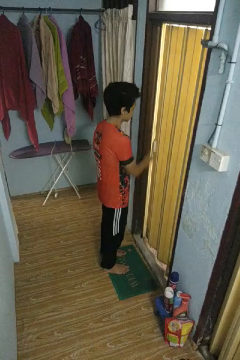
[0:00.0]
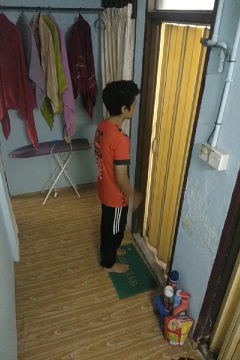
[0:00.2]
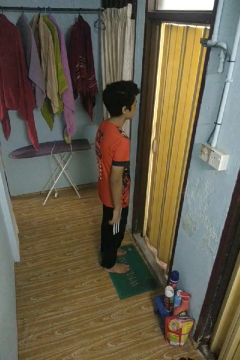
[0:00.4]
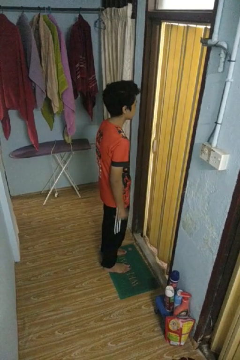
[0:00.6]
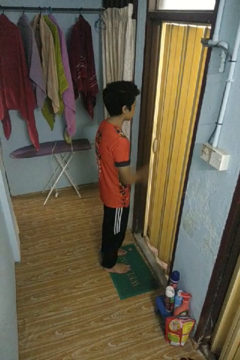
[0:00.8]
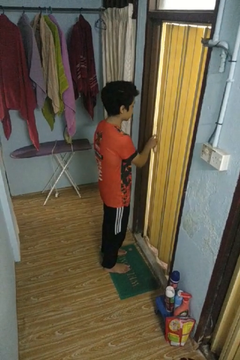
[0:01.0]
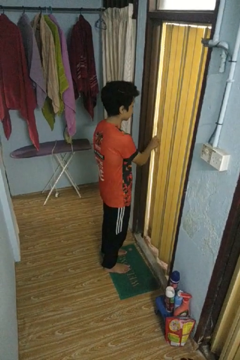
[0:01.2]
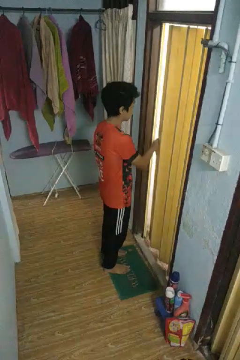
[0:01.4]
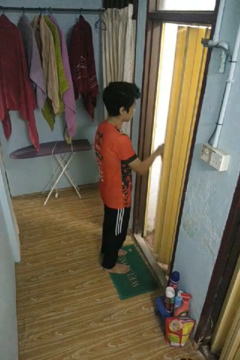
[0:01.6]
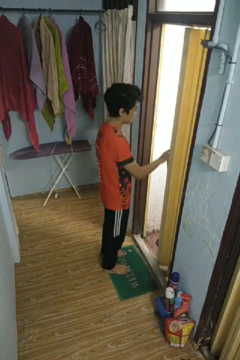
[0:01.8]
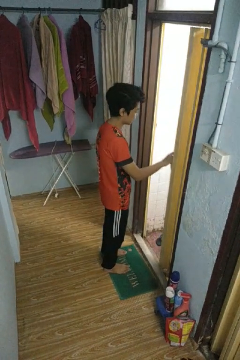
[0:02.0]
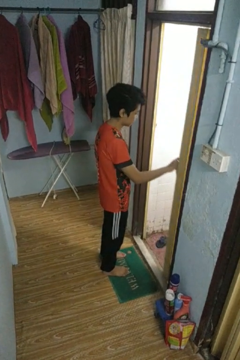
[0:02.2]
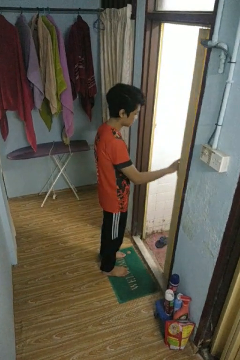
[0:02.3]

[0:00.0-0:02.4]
person opens sliding door

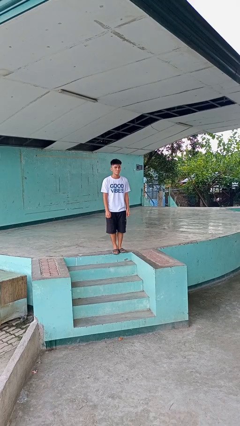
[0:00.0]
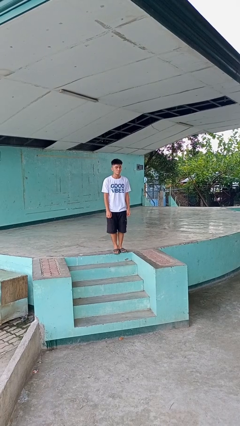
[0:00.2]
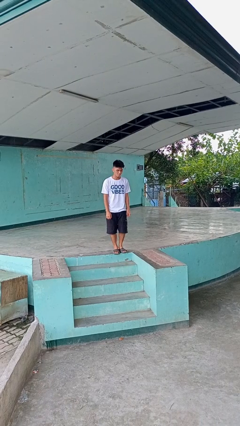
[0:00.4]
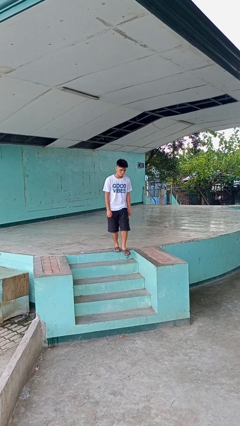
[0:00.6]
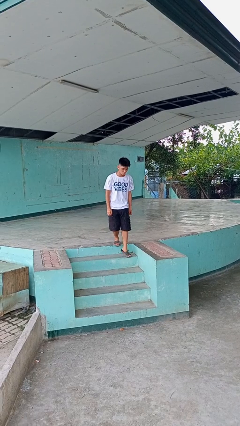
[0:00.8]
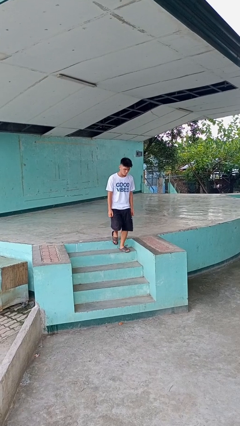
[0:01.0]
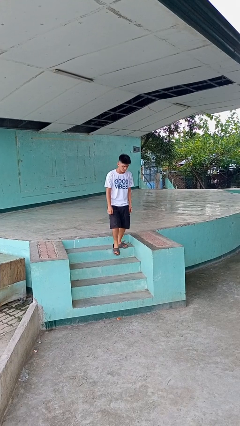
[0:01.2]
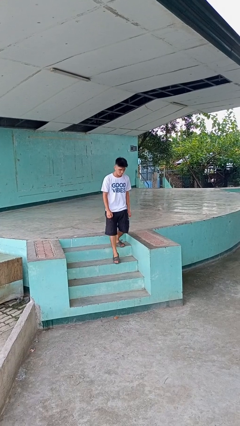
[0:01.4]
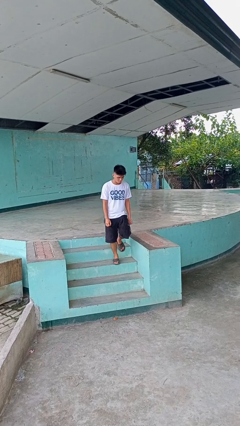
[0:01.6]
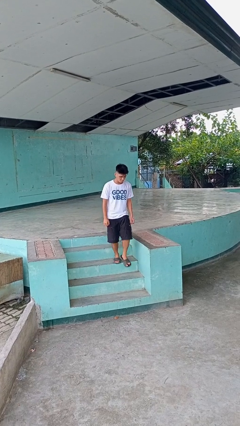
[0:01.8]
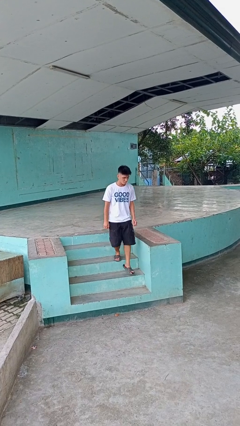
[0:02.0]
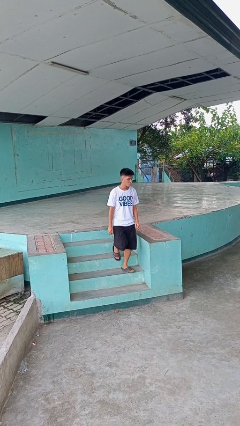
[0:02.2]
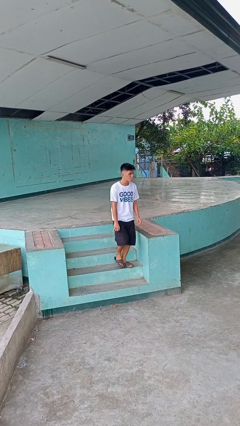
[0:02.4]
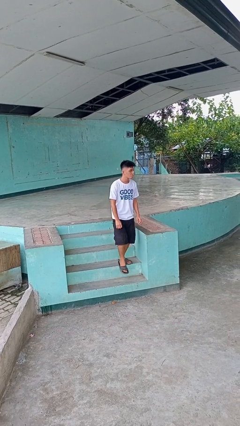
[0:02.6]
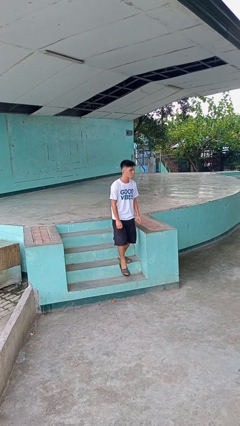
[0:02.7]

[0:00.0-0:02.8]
person climbs down stairs

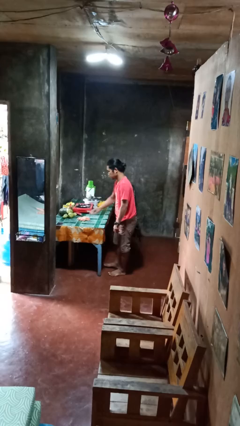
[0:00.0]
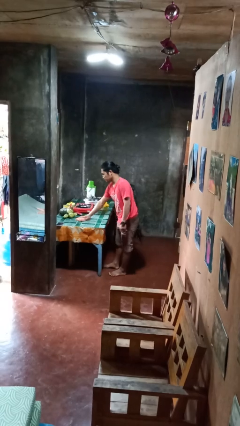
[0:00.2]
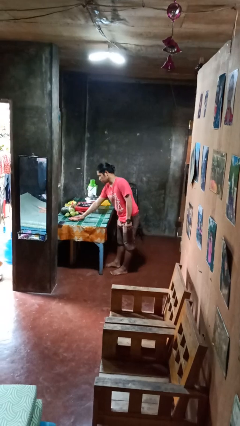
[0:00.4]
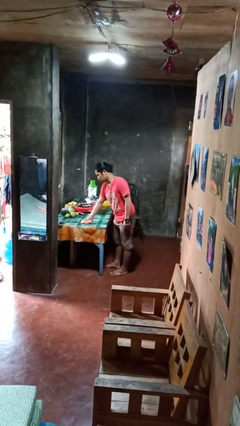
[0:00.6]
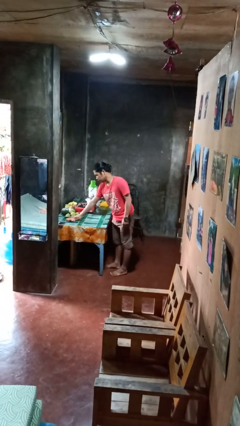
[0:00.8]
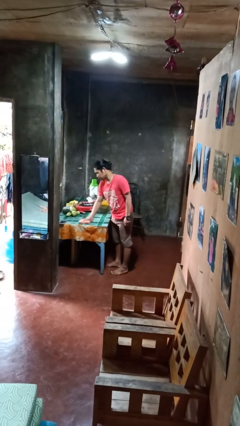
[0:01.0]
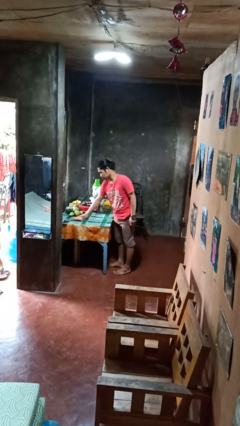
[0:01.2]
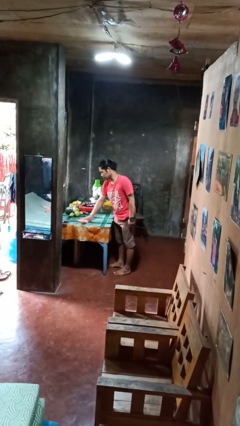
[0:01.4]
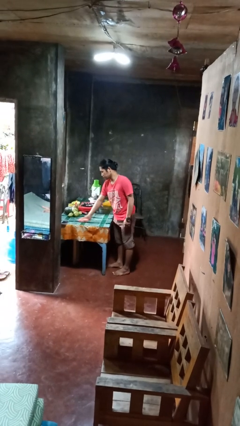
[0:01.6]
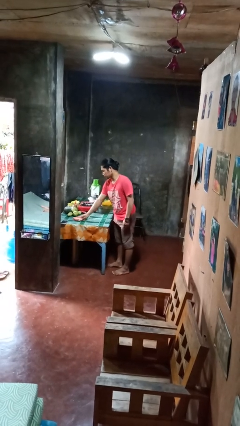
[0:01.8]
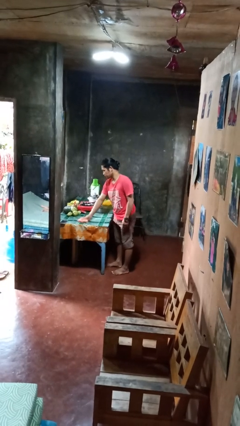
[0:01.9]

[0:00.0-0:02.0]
person cleans table with rag

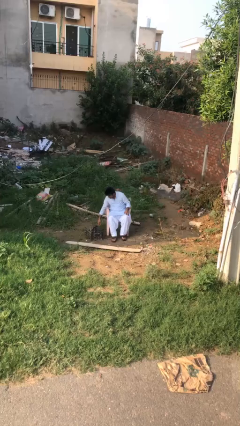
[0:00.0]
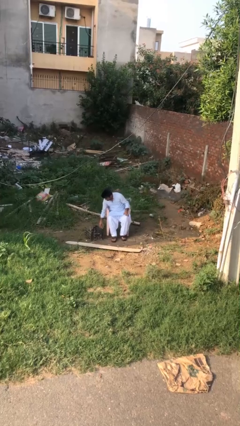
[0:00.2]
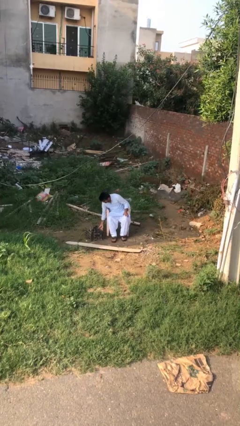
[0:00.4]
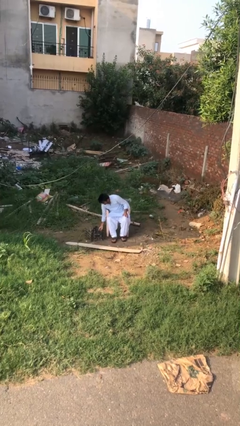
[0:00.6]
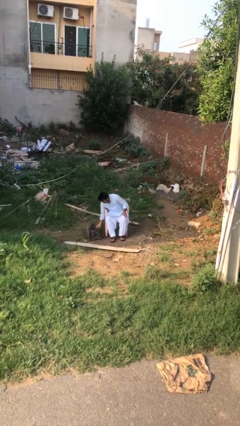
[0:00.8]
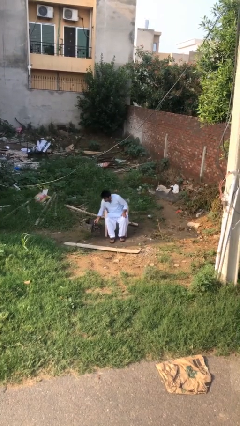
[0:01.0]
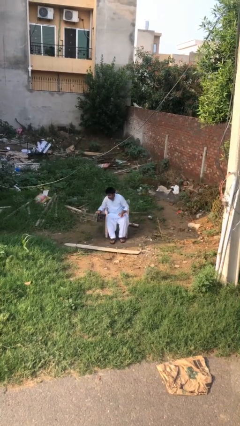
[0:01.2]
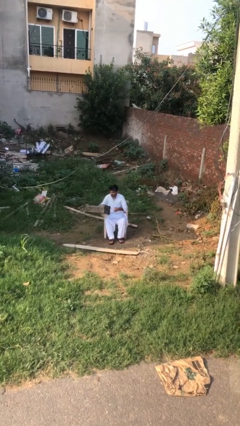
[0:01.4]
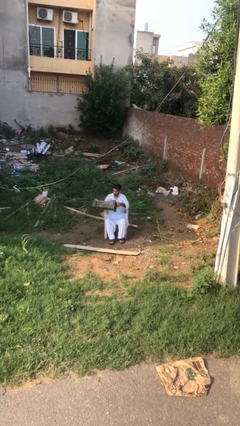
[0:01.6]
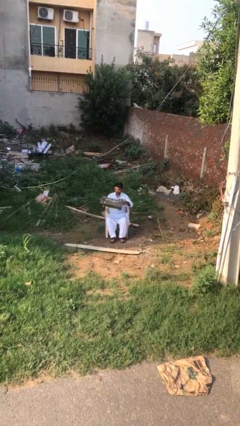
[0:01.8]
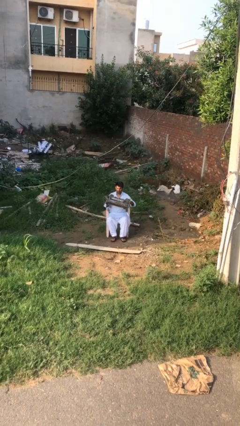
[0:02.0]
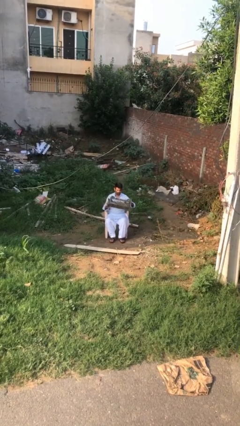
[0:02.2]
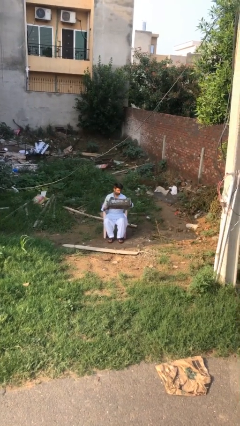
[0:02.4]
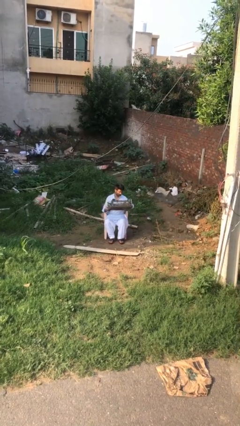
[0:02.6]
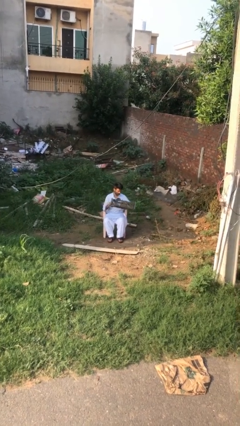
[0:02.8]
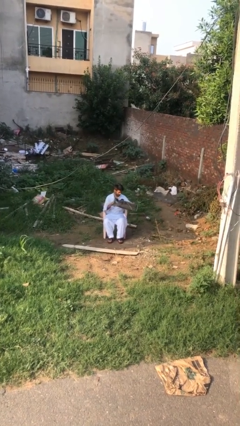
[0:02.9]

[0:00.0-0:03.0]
person picks up object from floor

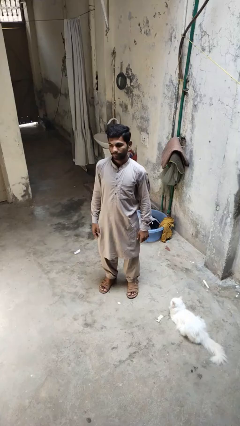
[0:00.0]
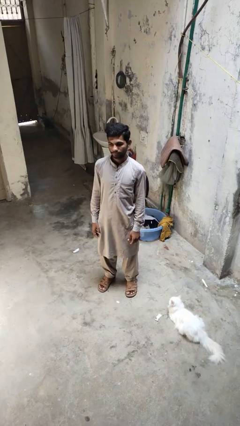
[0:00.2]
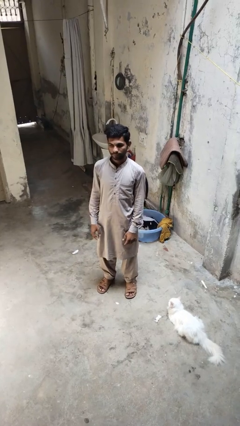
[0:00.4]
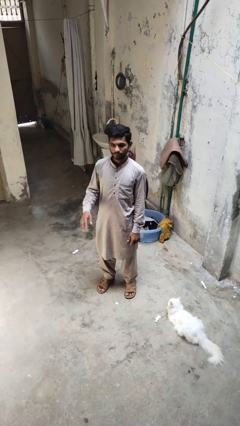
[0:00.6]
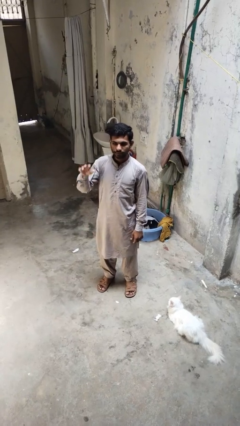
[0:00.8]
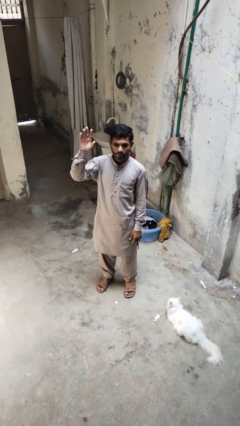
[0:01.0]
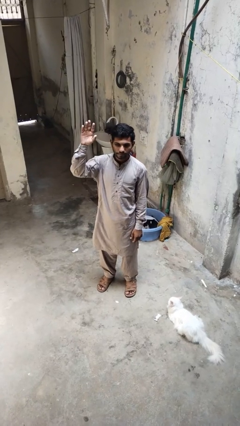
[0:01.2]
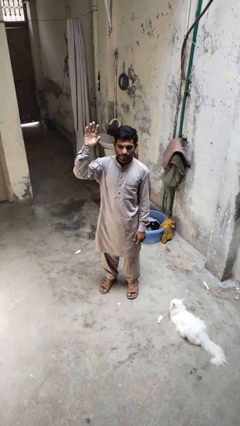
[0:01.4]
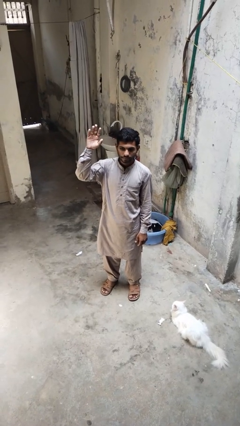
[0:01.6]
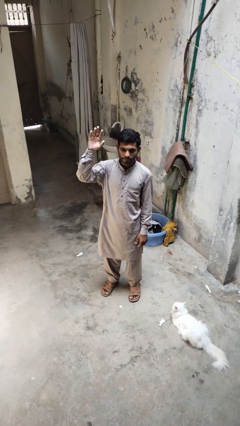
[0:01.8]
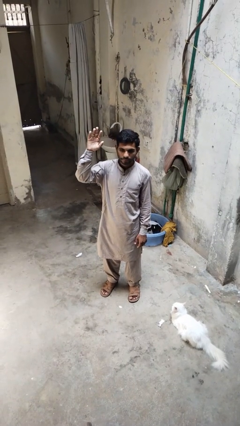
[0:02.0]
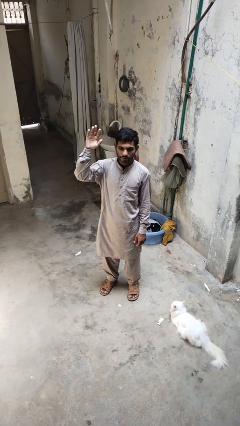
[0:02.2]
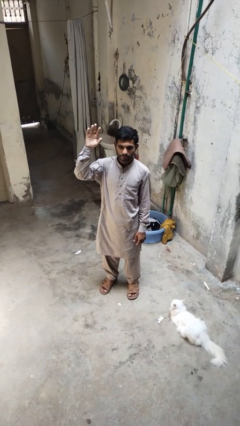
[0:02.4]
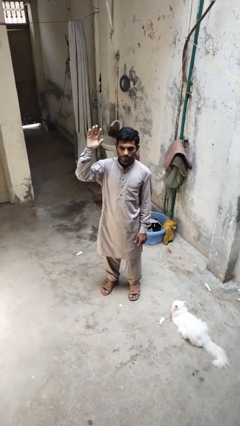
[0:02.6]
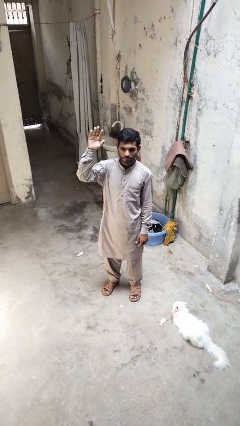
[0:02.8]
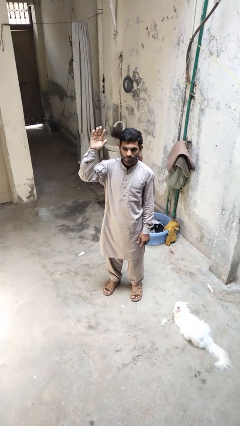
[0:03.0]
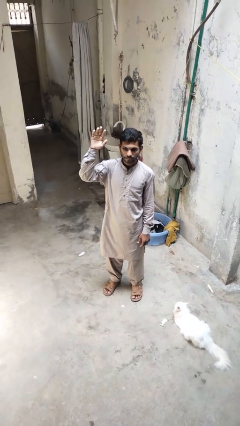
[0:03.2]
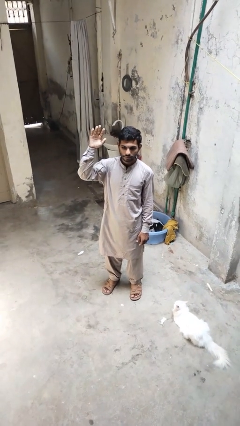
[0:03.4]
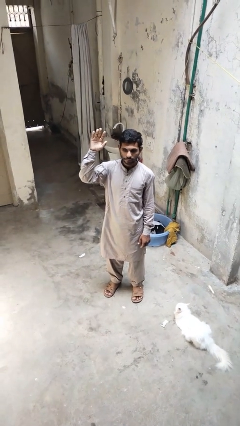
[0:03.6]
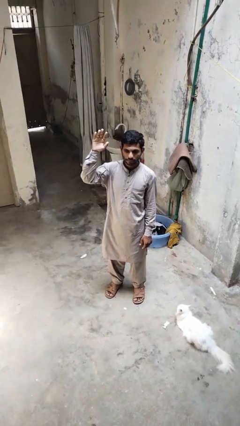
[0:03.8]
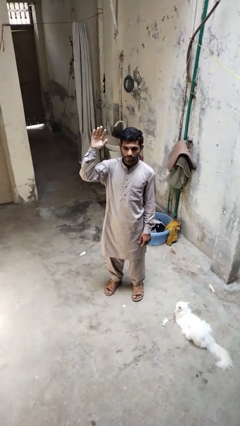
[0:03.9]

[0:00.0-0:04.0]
person gestures raise hand

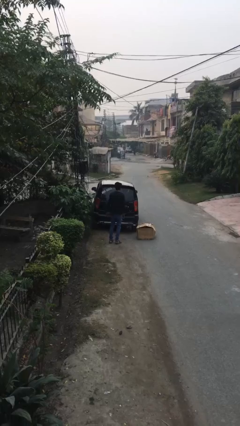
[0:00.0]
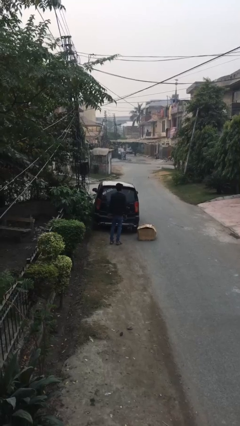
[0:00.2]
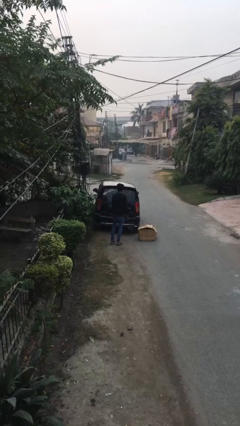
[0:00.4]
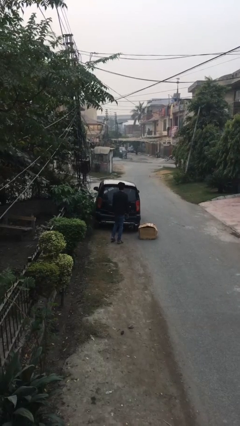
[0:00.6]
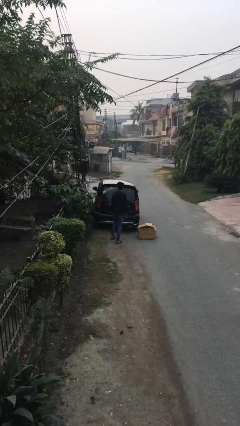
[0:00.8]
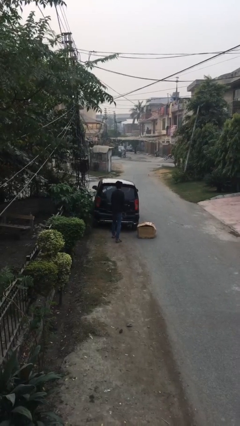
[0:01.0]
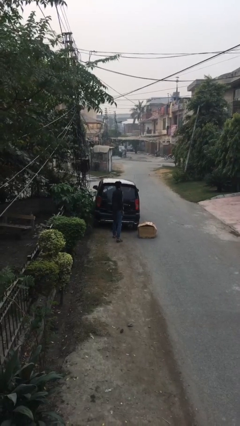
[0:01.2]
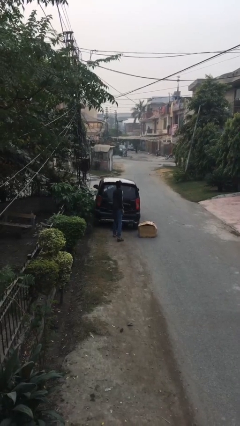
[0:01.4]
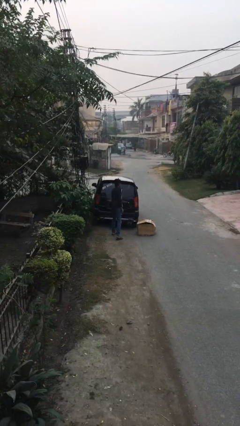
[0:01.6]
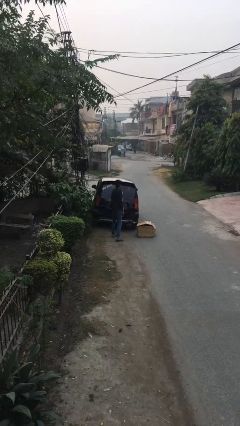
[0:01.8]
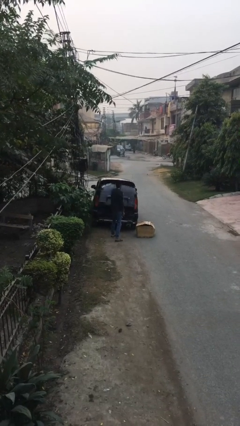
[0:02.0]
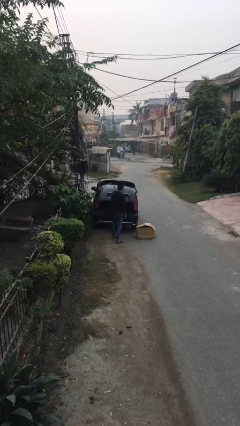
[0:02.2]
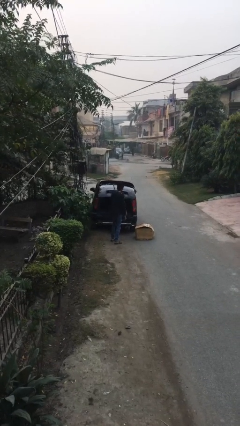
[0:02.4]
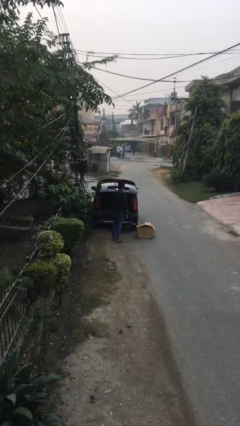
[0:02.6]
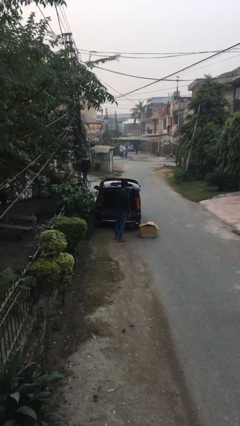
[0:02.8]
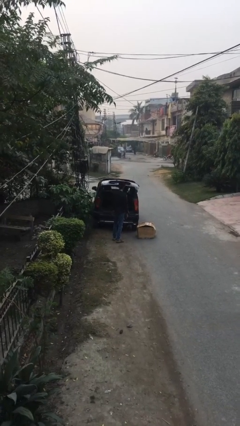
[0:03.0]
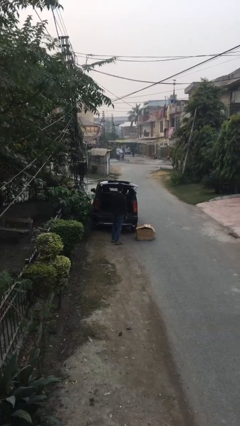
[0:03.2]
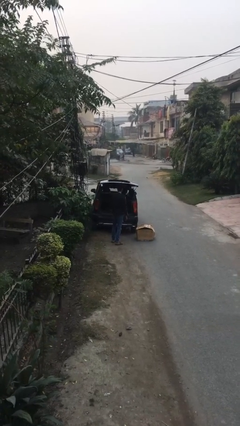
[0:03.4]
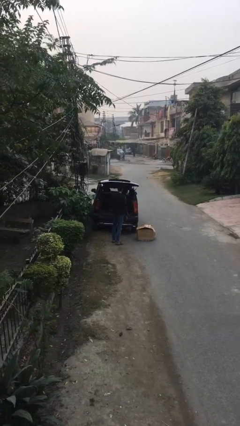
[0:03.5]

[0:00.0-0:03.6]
person opens car trunk
